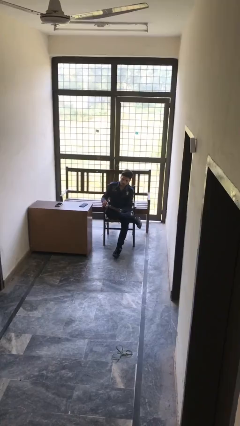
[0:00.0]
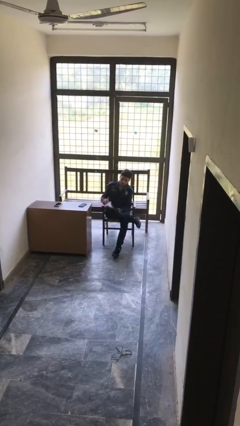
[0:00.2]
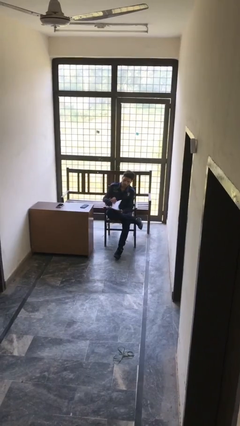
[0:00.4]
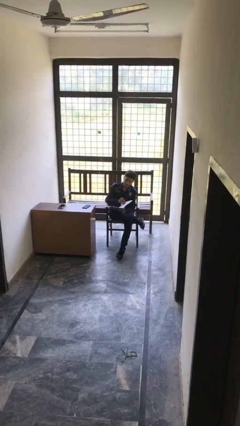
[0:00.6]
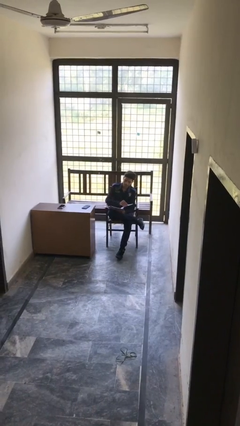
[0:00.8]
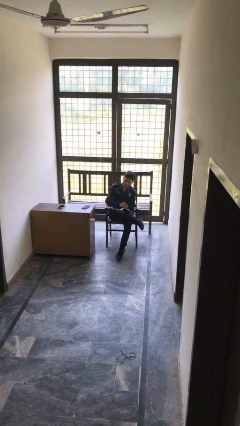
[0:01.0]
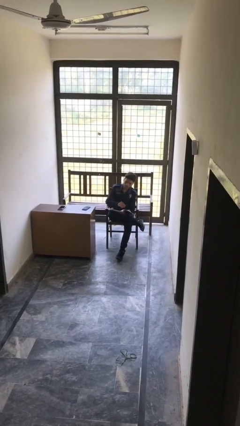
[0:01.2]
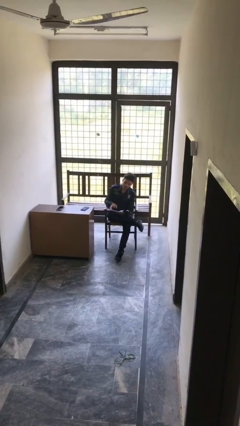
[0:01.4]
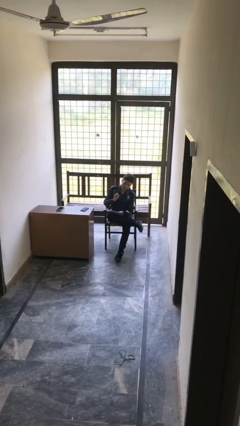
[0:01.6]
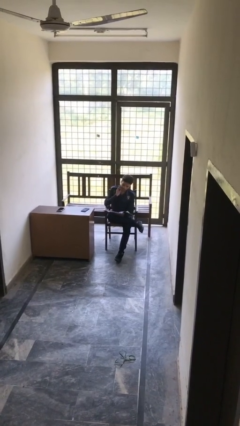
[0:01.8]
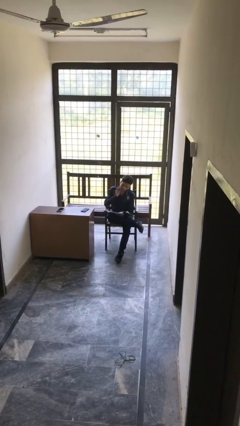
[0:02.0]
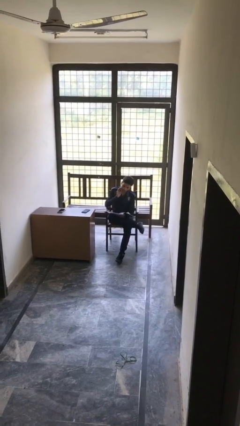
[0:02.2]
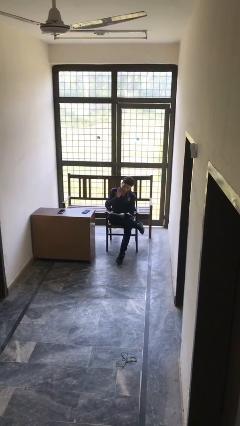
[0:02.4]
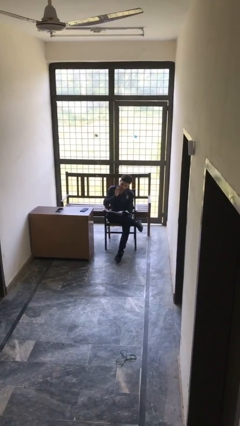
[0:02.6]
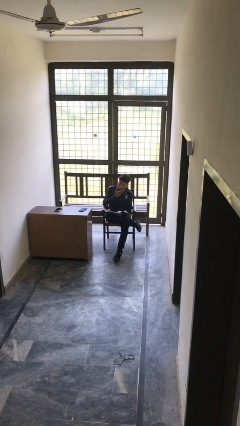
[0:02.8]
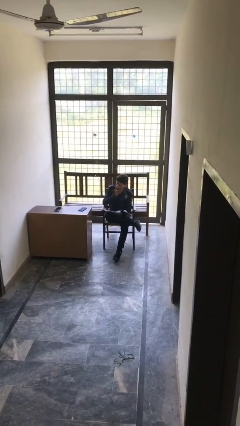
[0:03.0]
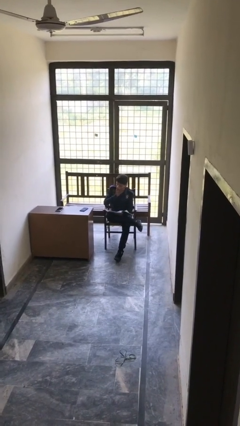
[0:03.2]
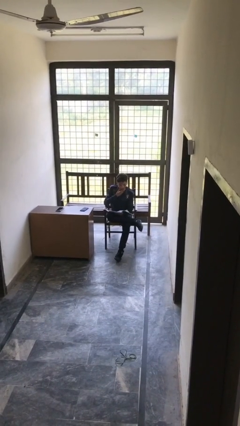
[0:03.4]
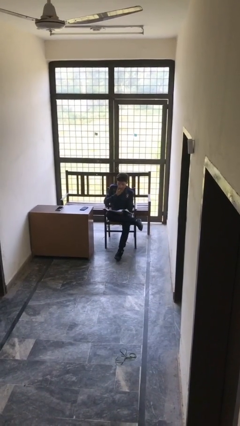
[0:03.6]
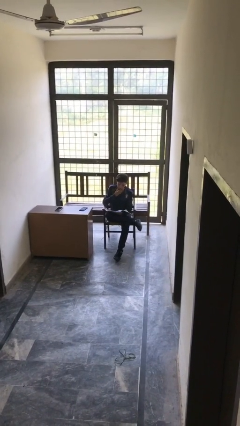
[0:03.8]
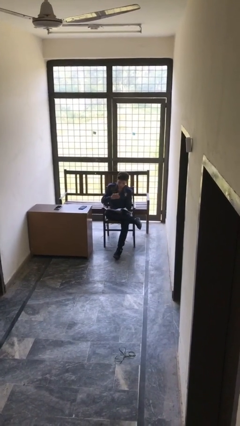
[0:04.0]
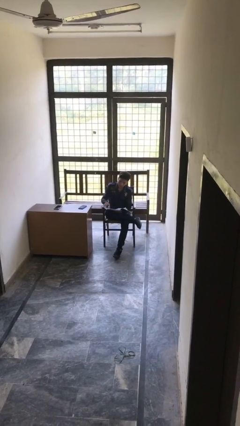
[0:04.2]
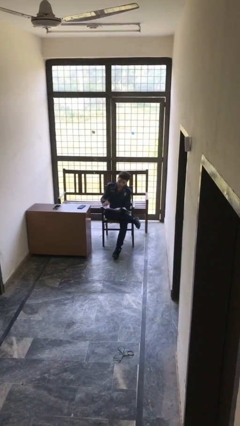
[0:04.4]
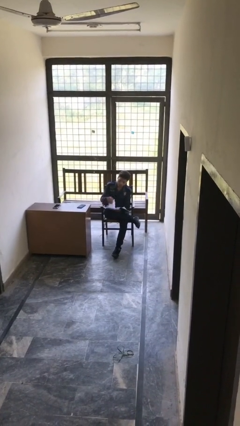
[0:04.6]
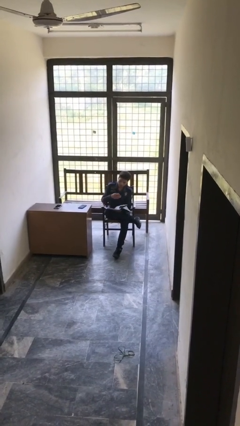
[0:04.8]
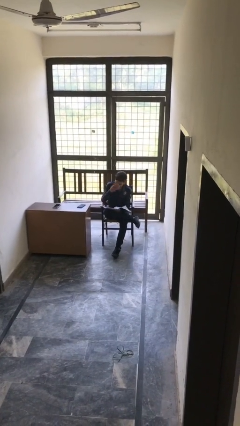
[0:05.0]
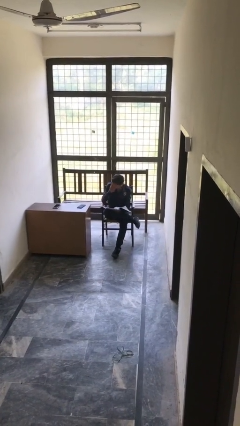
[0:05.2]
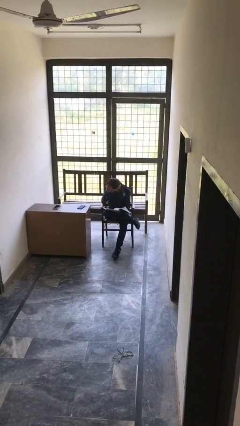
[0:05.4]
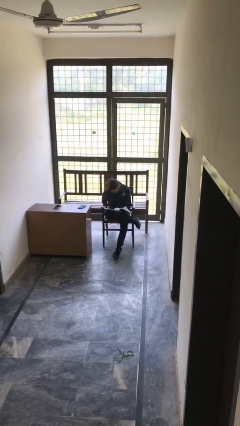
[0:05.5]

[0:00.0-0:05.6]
person reads document

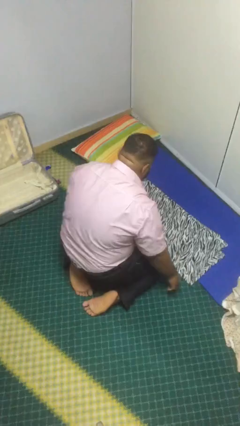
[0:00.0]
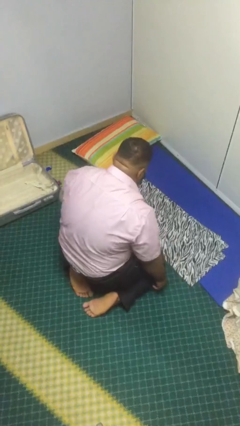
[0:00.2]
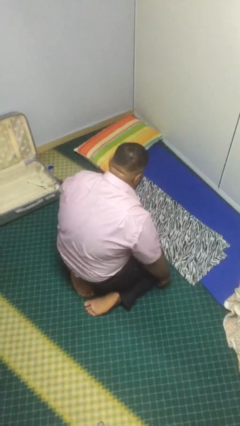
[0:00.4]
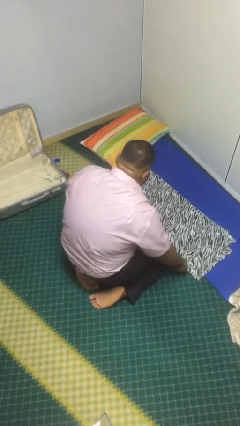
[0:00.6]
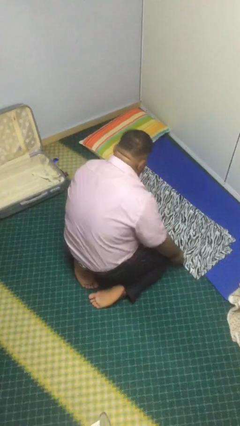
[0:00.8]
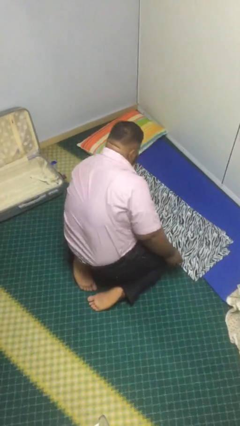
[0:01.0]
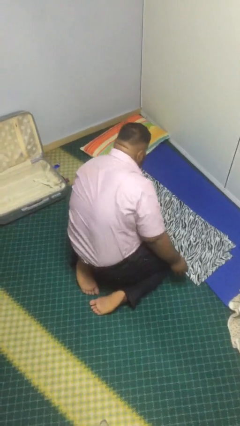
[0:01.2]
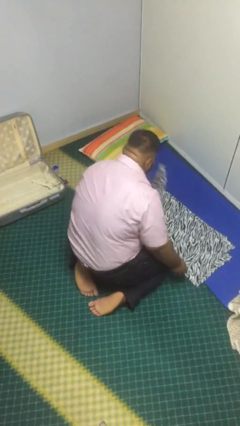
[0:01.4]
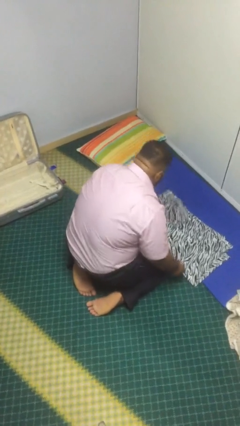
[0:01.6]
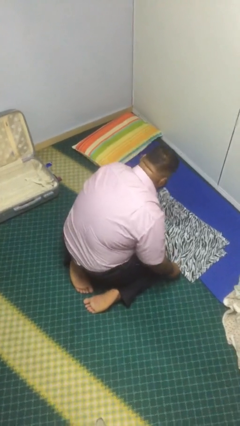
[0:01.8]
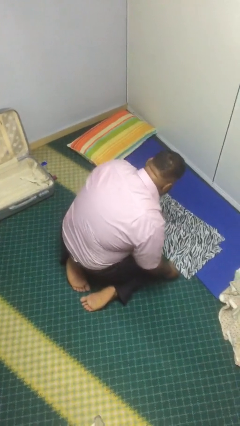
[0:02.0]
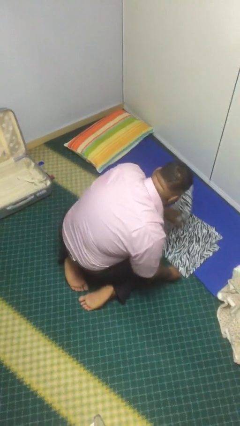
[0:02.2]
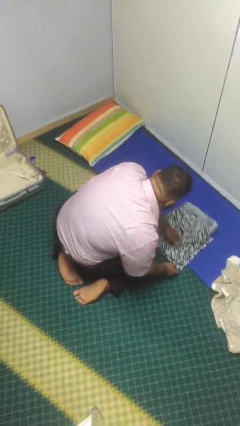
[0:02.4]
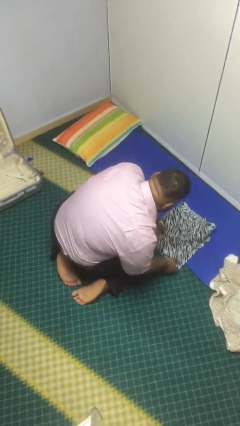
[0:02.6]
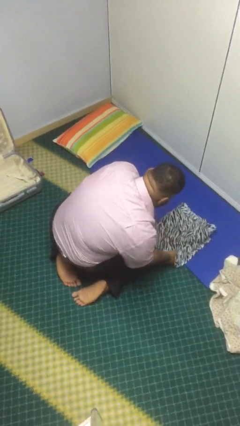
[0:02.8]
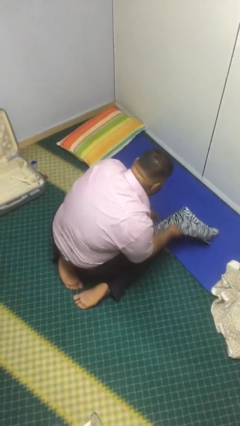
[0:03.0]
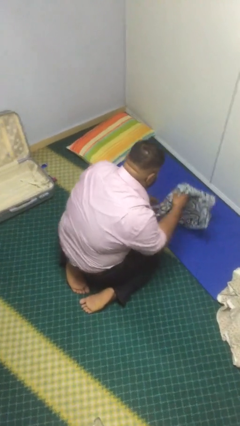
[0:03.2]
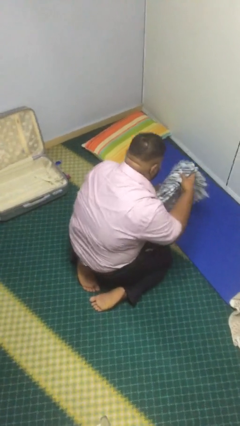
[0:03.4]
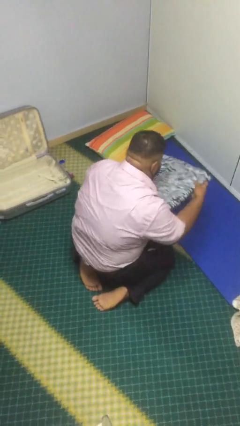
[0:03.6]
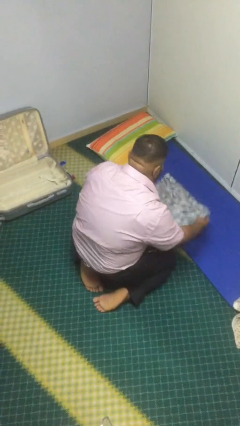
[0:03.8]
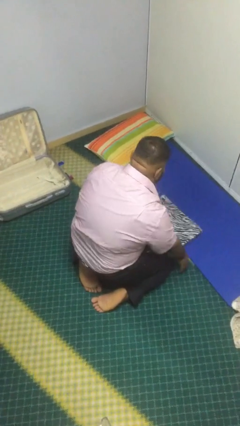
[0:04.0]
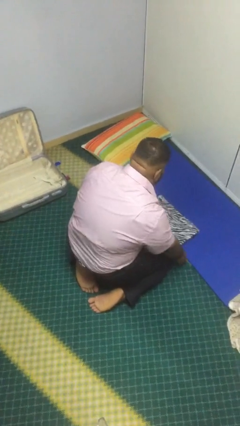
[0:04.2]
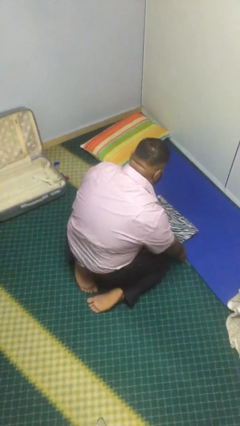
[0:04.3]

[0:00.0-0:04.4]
person folds blanket

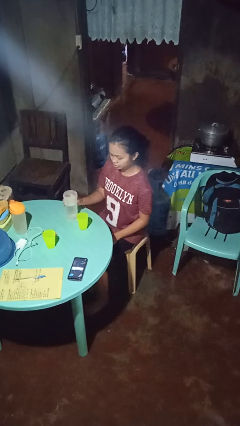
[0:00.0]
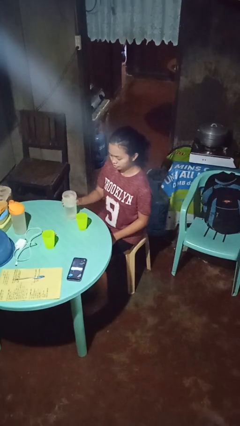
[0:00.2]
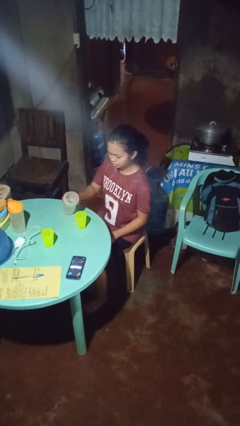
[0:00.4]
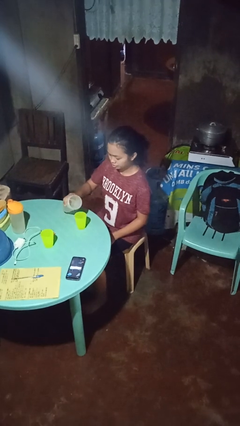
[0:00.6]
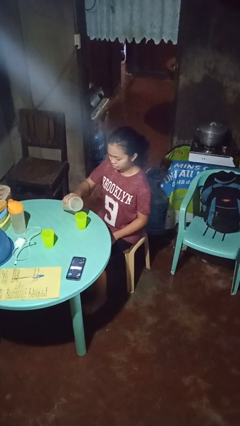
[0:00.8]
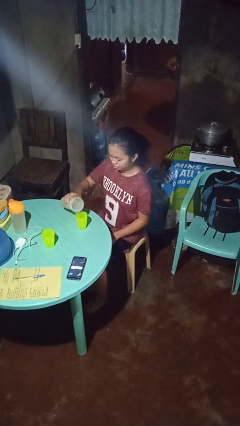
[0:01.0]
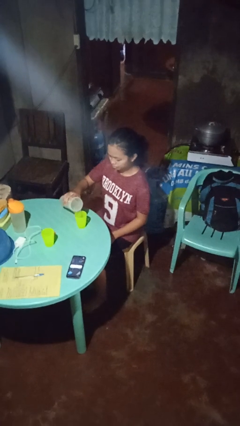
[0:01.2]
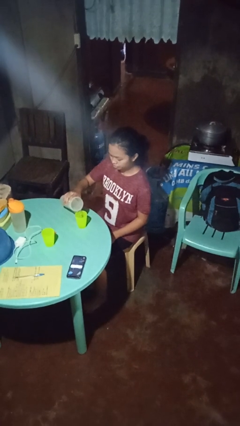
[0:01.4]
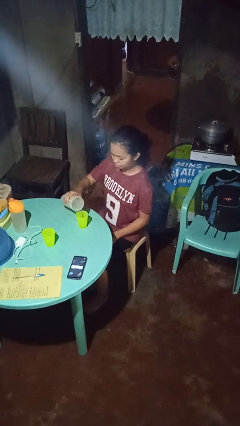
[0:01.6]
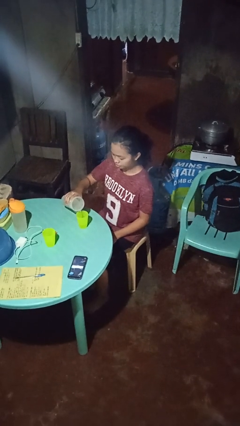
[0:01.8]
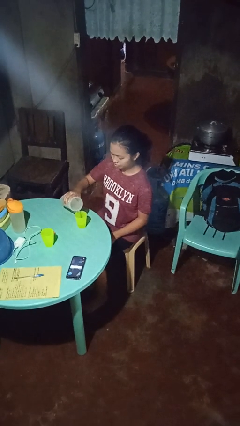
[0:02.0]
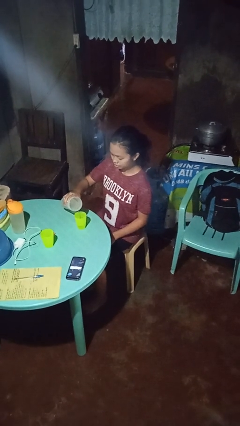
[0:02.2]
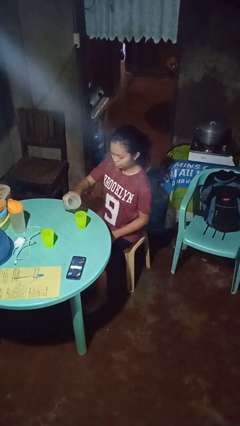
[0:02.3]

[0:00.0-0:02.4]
person pours liquid into cup

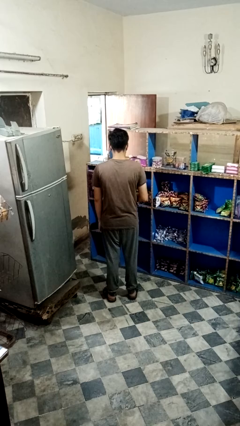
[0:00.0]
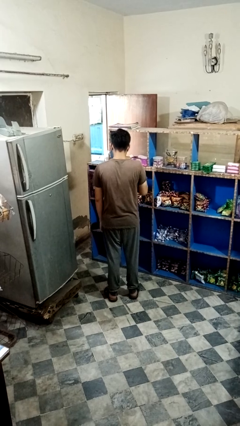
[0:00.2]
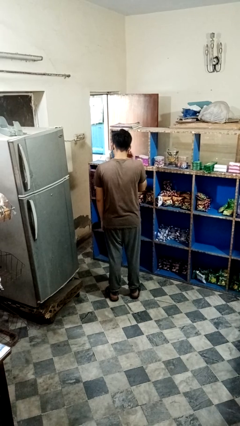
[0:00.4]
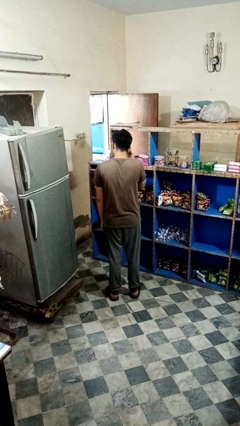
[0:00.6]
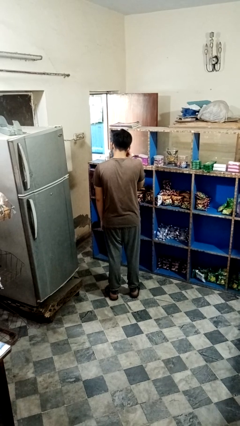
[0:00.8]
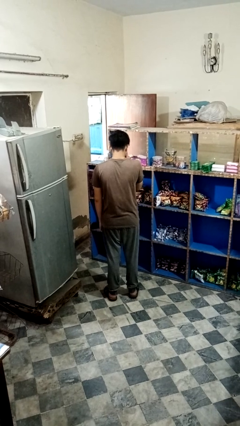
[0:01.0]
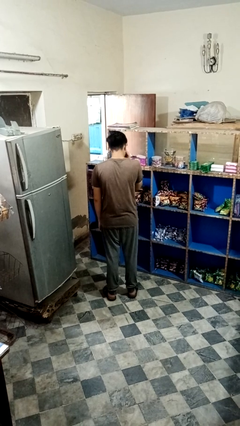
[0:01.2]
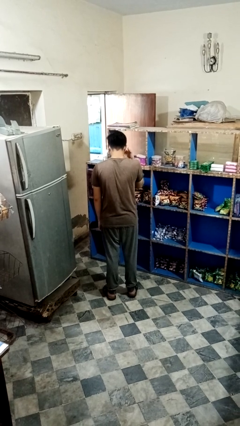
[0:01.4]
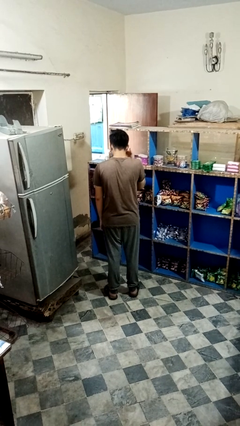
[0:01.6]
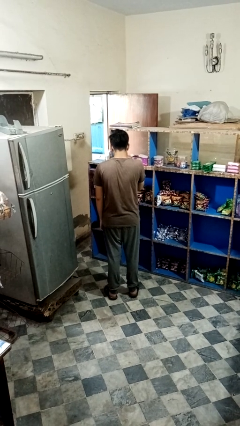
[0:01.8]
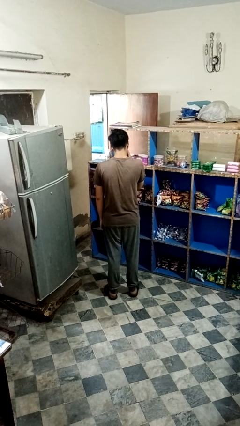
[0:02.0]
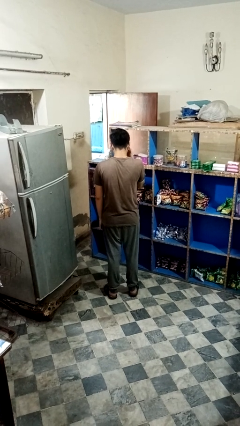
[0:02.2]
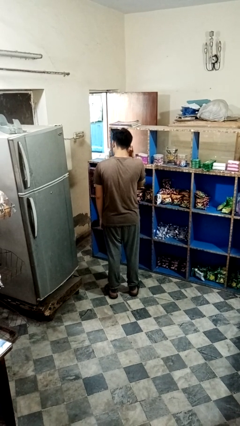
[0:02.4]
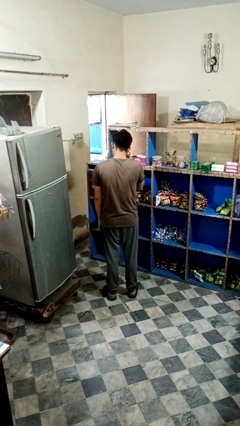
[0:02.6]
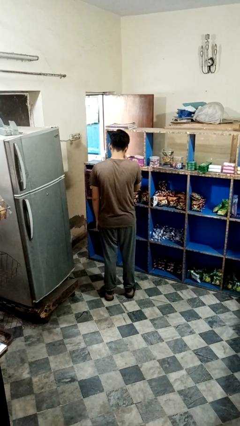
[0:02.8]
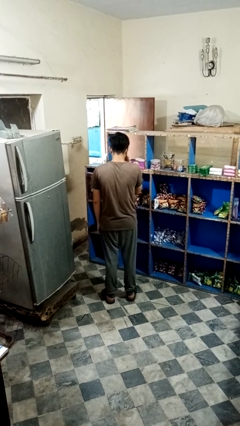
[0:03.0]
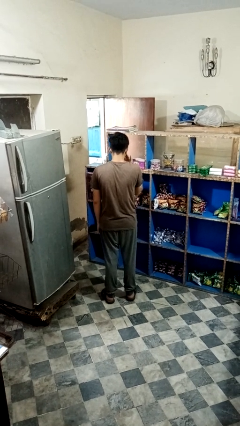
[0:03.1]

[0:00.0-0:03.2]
person rubs eyes

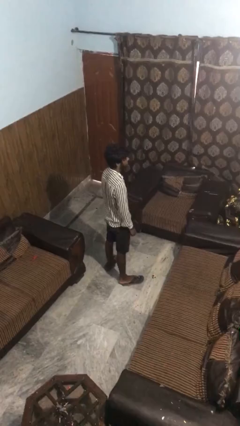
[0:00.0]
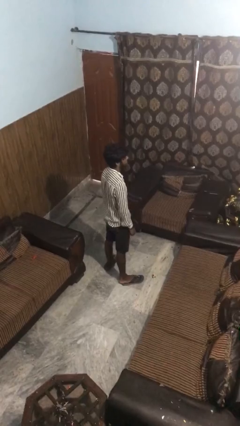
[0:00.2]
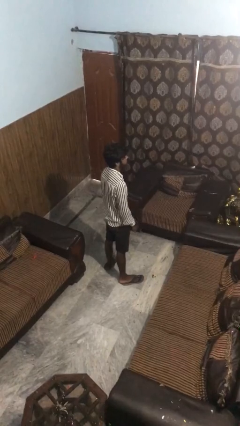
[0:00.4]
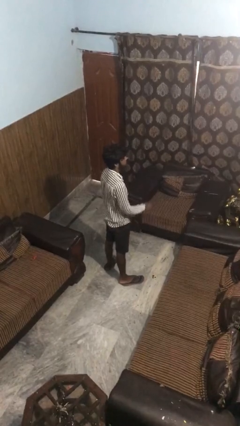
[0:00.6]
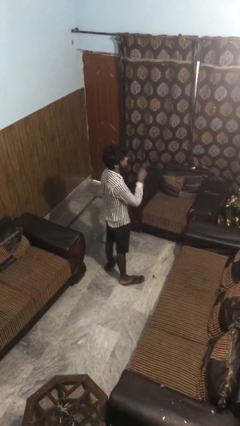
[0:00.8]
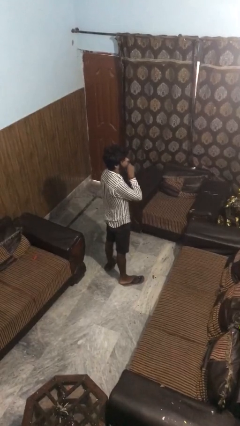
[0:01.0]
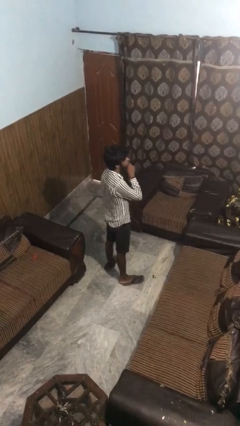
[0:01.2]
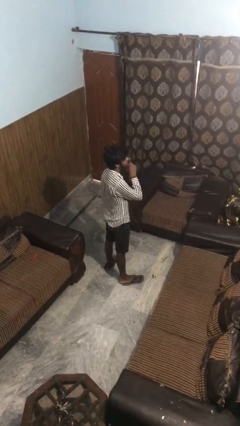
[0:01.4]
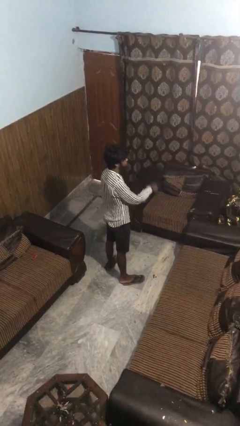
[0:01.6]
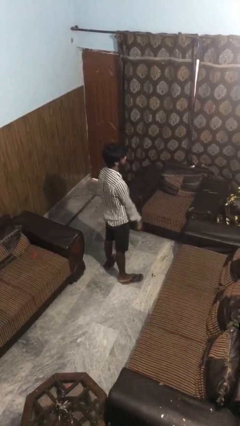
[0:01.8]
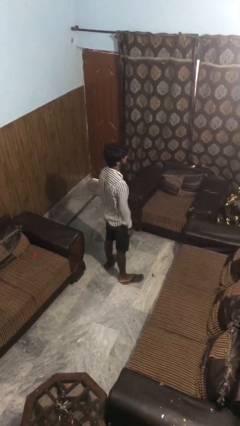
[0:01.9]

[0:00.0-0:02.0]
person gestures be quiet

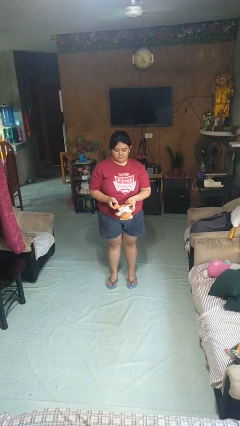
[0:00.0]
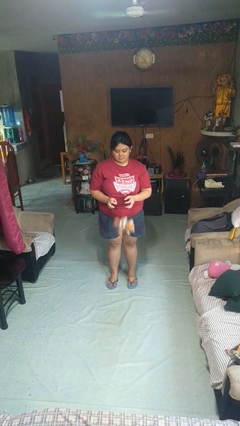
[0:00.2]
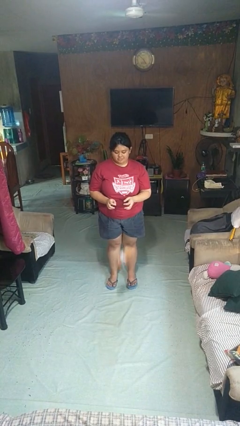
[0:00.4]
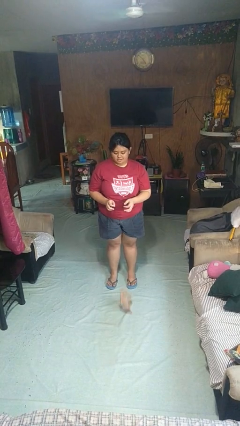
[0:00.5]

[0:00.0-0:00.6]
person drops object
